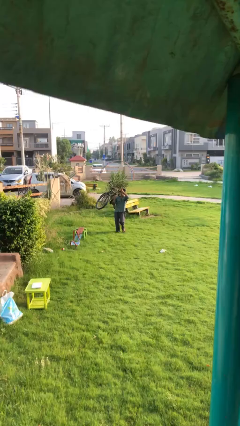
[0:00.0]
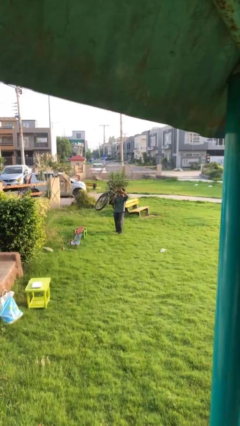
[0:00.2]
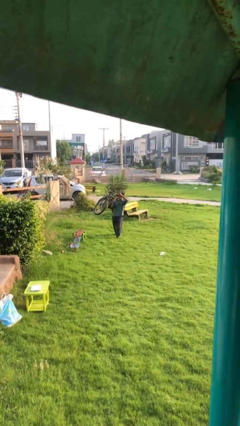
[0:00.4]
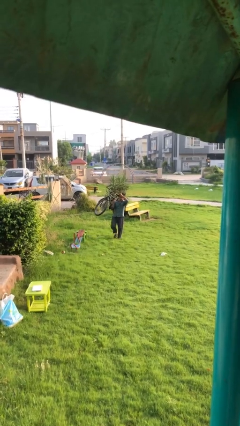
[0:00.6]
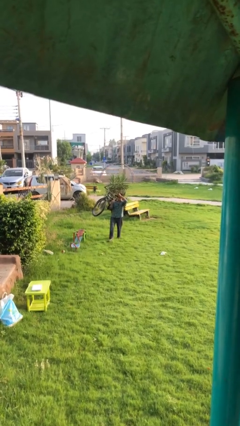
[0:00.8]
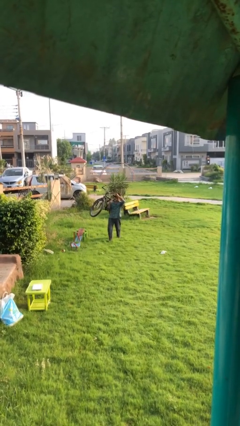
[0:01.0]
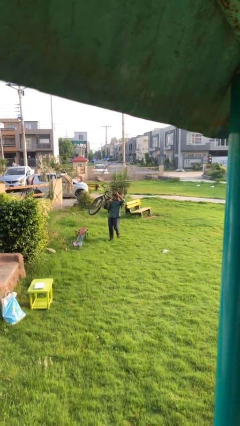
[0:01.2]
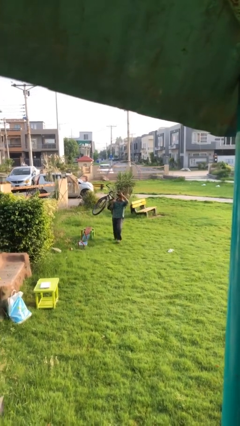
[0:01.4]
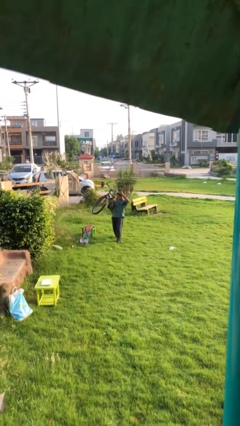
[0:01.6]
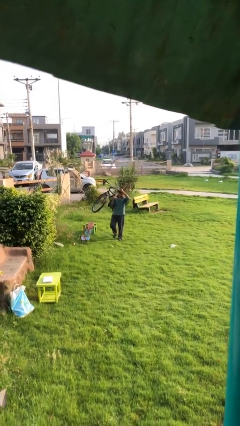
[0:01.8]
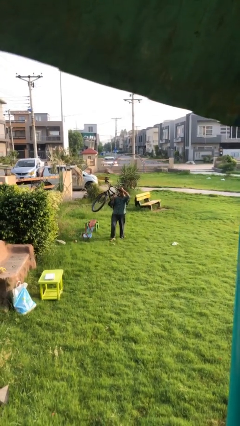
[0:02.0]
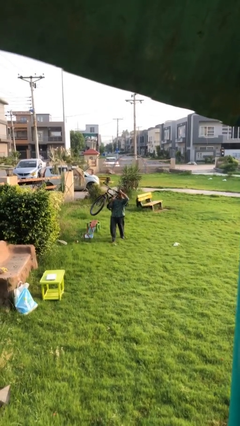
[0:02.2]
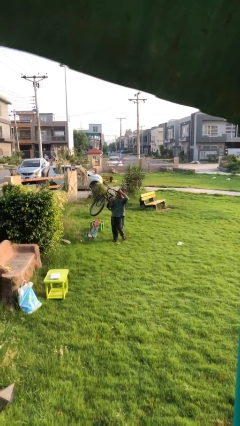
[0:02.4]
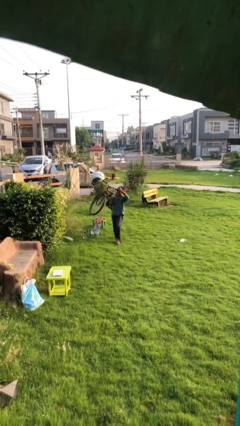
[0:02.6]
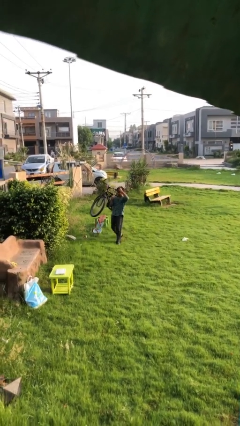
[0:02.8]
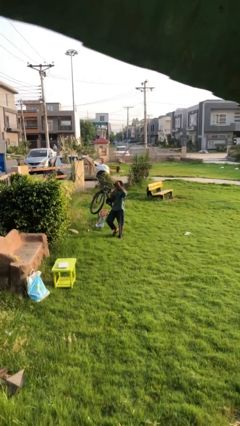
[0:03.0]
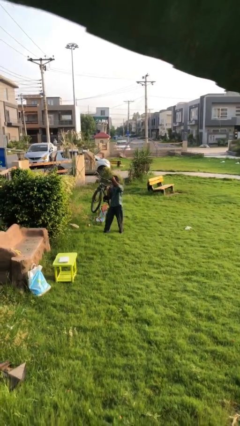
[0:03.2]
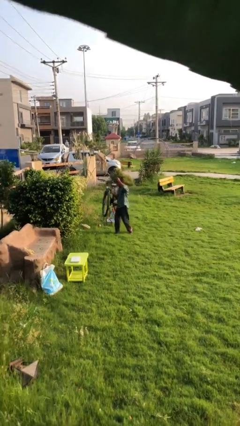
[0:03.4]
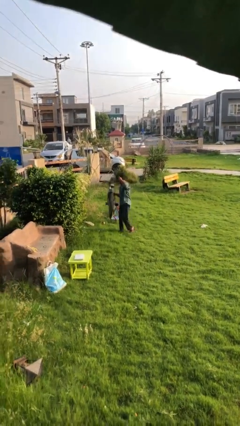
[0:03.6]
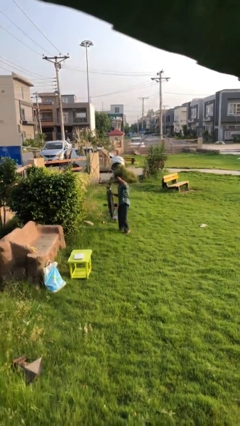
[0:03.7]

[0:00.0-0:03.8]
person carries heavy object

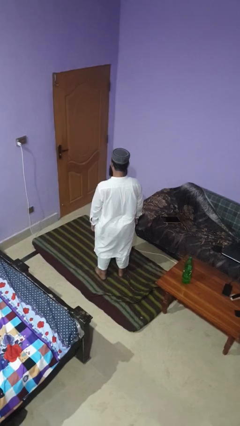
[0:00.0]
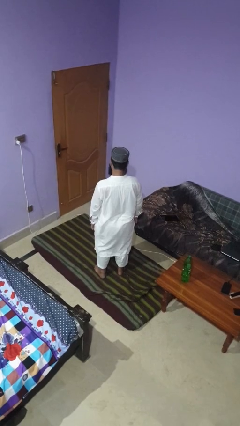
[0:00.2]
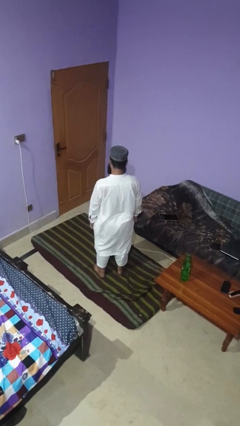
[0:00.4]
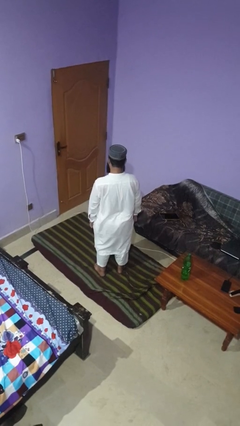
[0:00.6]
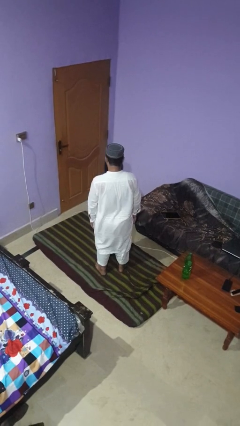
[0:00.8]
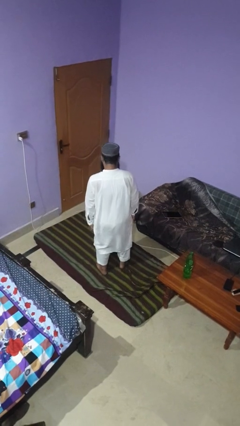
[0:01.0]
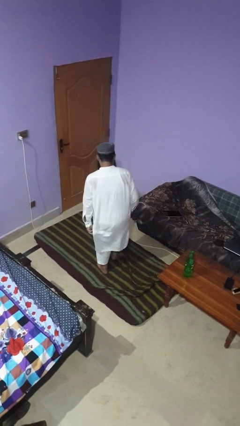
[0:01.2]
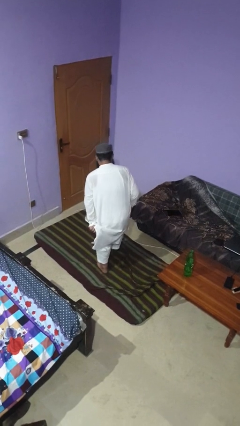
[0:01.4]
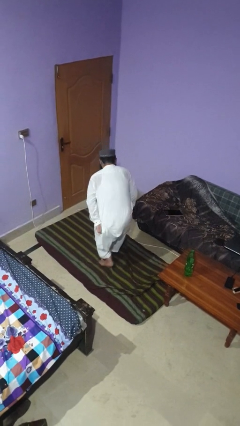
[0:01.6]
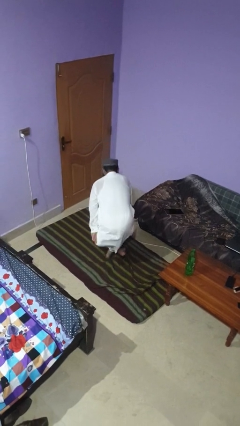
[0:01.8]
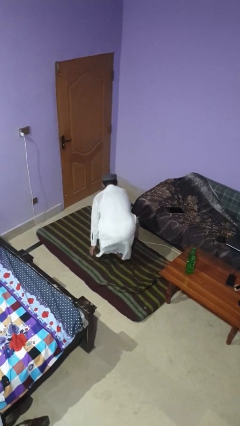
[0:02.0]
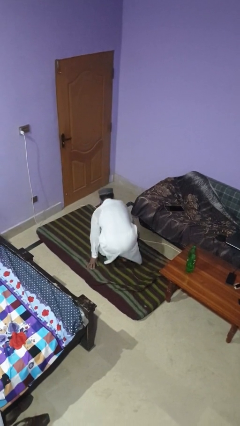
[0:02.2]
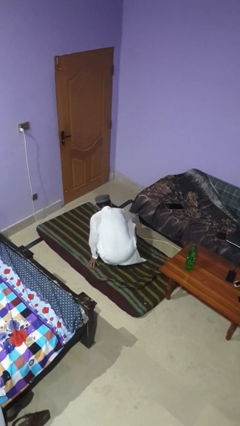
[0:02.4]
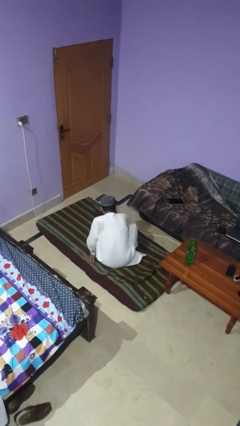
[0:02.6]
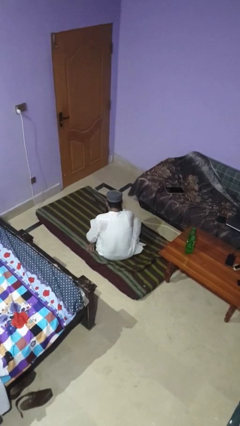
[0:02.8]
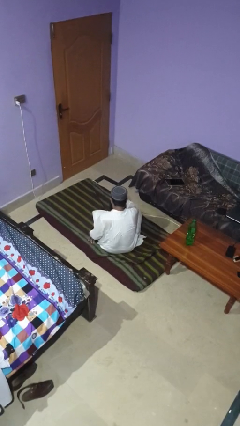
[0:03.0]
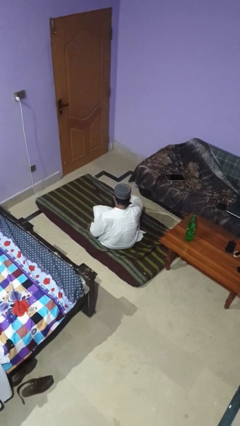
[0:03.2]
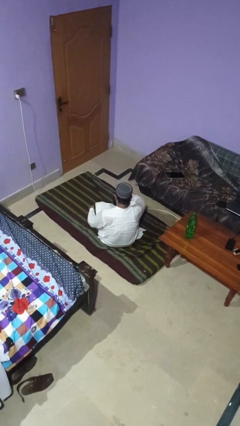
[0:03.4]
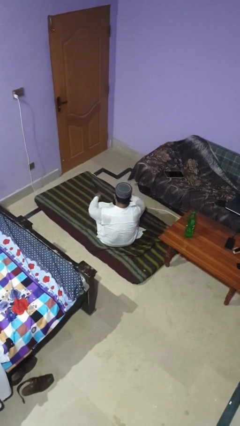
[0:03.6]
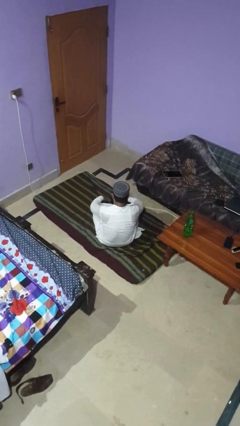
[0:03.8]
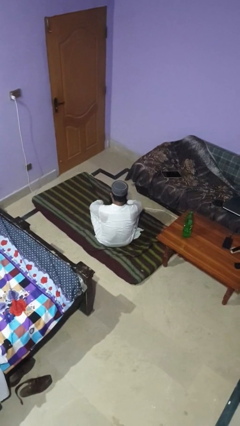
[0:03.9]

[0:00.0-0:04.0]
person sits crisscross

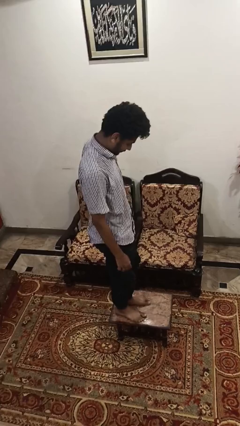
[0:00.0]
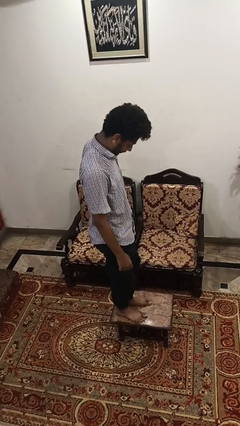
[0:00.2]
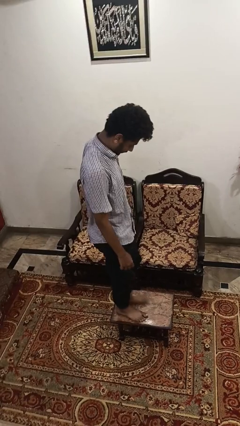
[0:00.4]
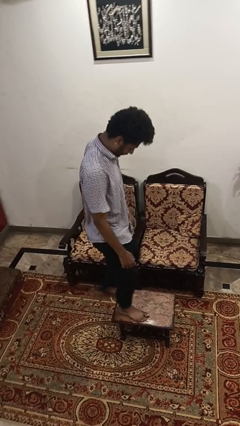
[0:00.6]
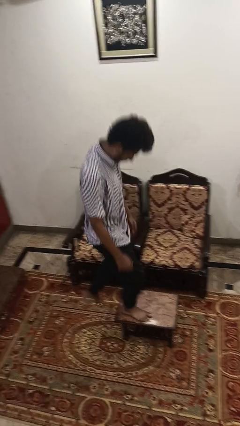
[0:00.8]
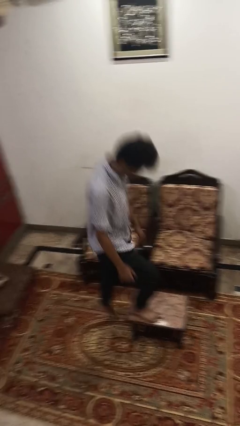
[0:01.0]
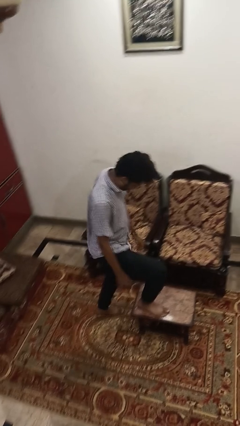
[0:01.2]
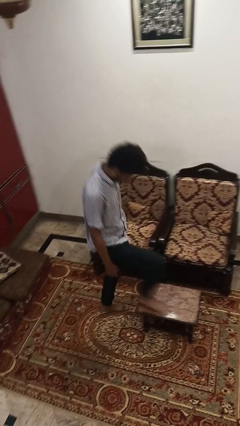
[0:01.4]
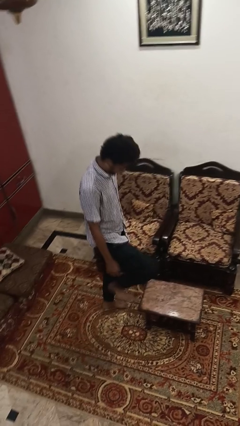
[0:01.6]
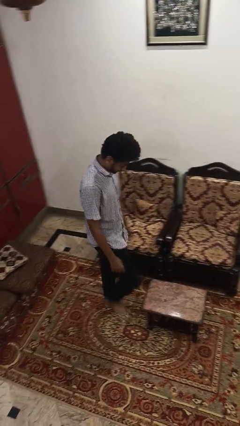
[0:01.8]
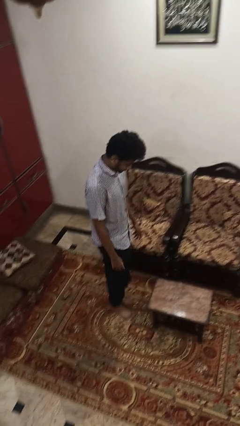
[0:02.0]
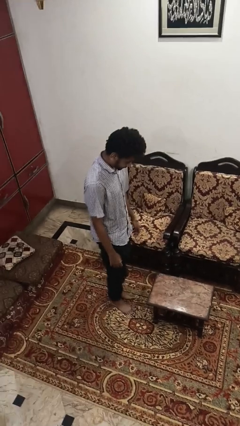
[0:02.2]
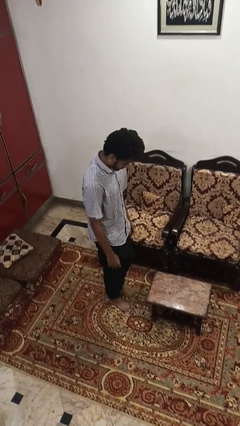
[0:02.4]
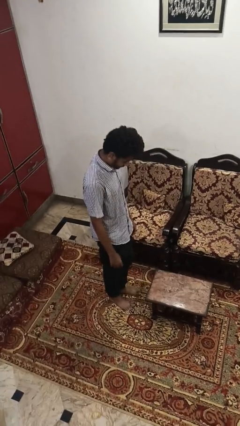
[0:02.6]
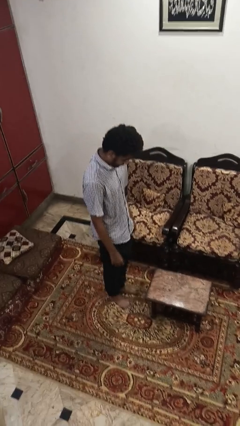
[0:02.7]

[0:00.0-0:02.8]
person climbs off table

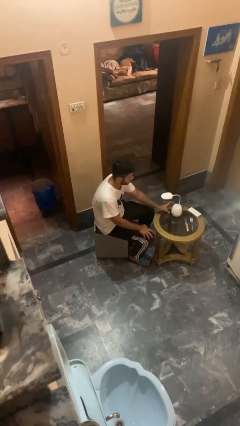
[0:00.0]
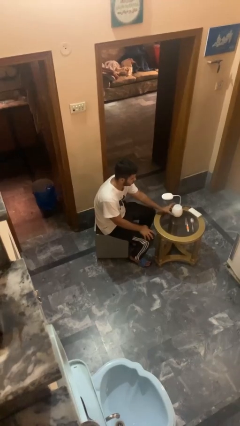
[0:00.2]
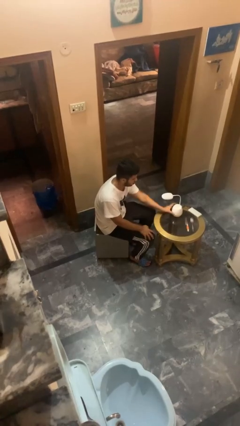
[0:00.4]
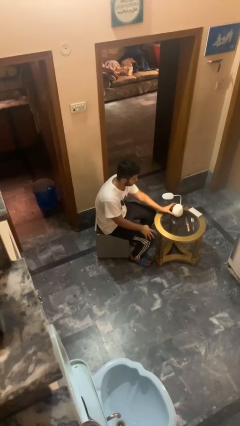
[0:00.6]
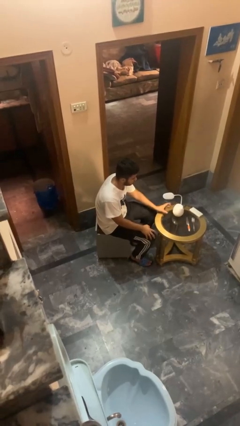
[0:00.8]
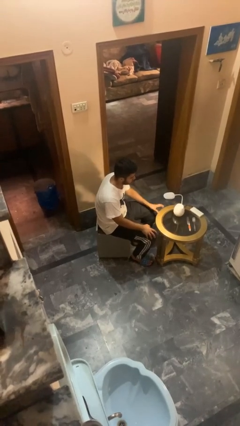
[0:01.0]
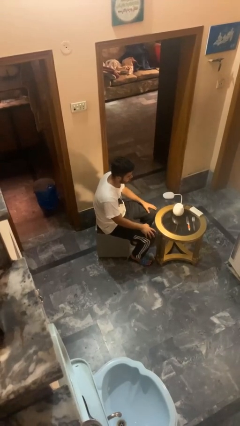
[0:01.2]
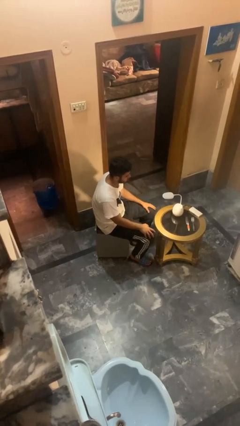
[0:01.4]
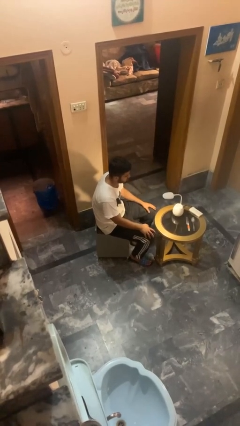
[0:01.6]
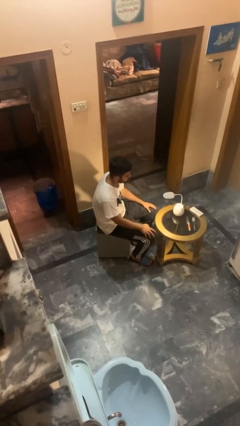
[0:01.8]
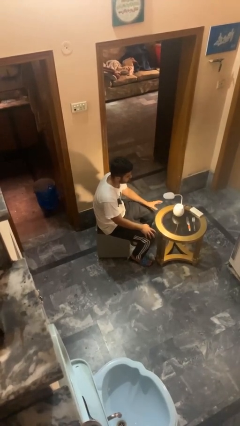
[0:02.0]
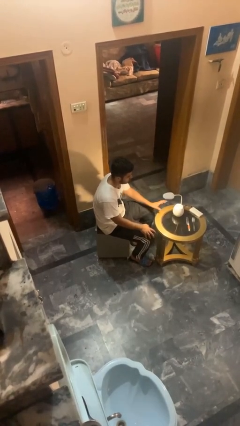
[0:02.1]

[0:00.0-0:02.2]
person turns on lamp

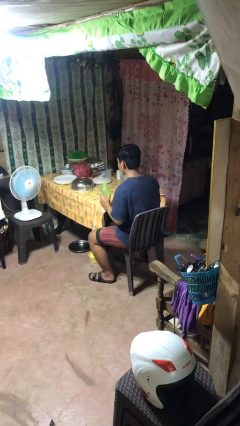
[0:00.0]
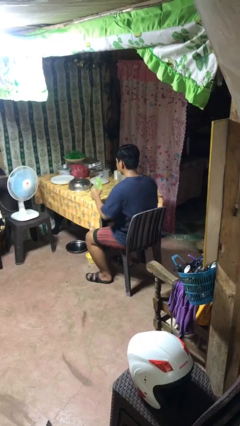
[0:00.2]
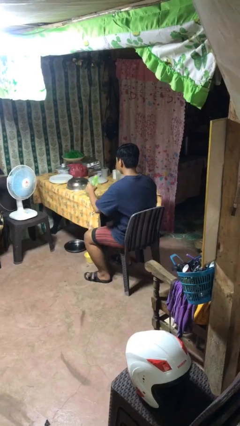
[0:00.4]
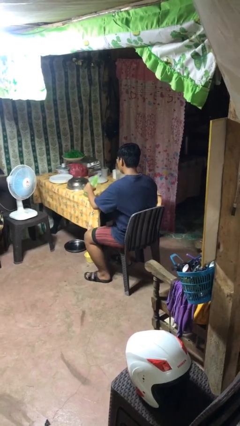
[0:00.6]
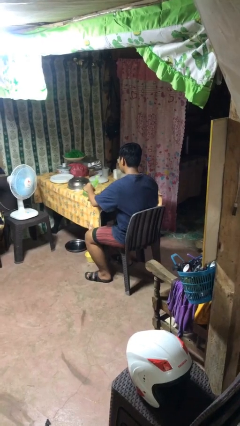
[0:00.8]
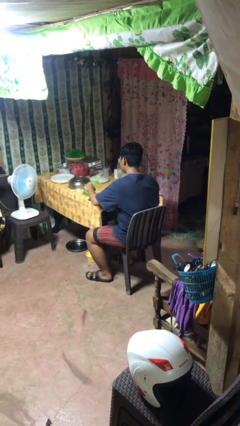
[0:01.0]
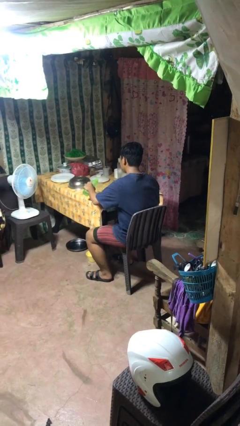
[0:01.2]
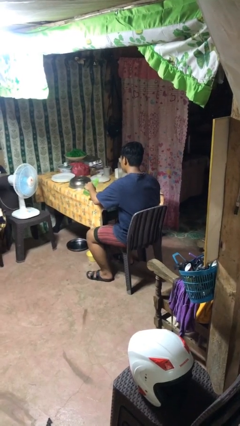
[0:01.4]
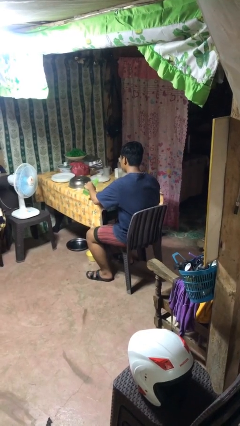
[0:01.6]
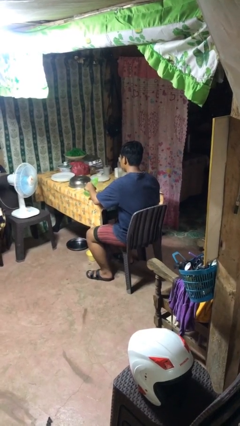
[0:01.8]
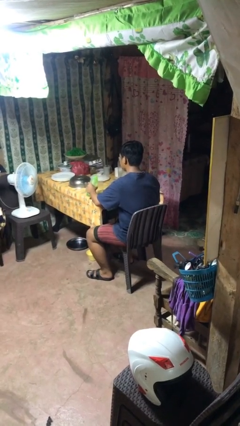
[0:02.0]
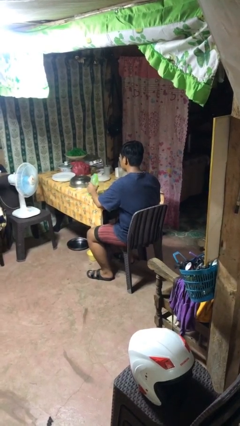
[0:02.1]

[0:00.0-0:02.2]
person pours liquid into cup

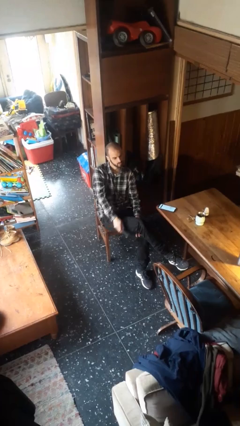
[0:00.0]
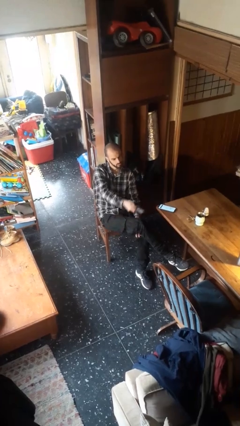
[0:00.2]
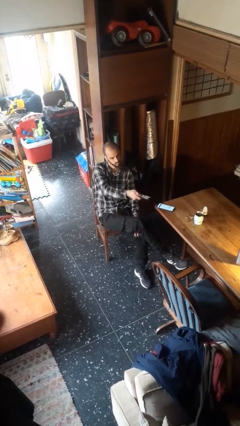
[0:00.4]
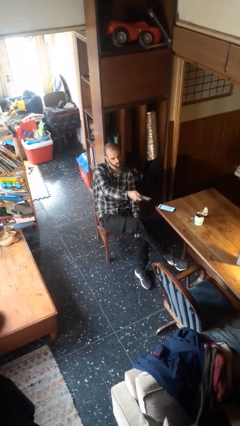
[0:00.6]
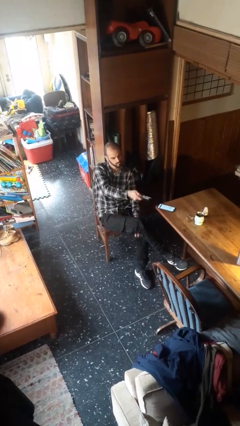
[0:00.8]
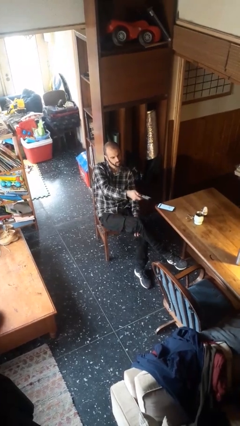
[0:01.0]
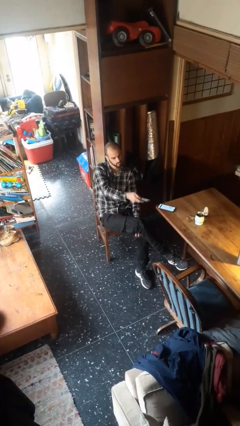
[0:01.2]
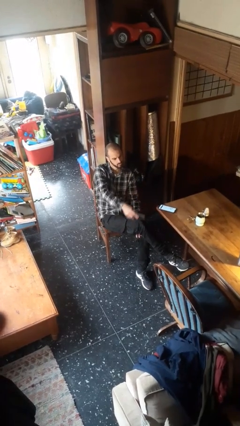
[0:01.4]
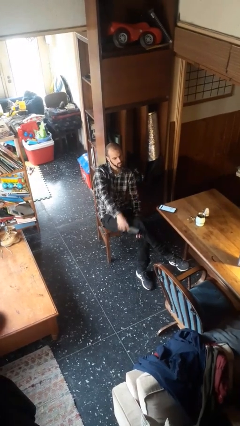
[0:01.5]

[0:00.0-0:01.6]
person uses television remote

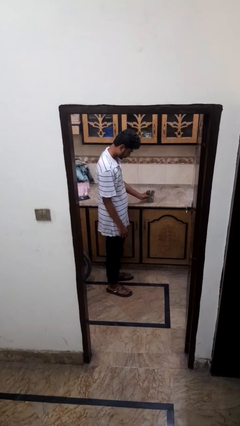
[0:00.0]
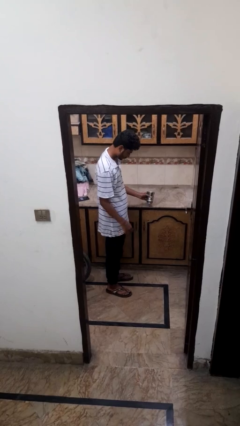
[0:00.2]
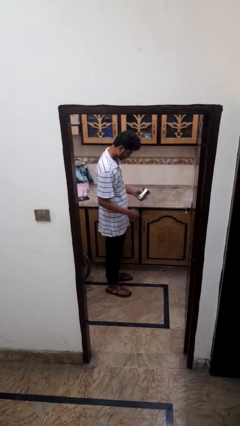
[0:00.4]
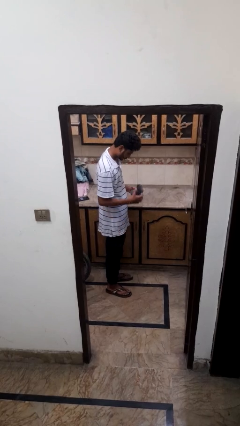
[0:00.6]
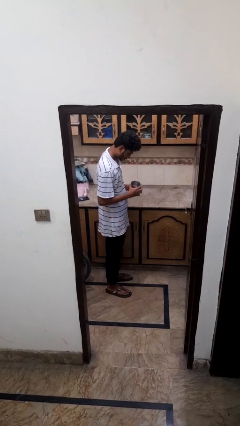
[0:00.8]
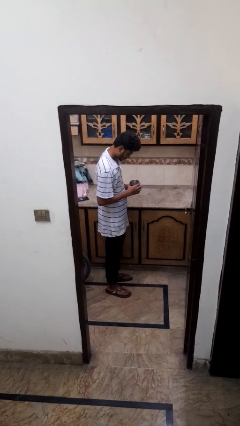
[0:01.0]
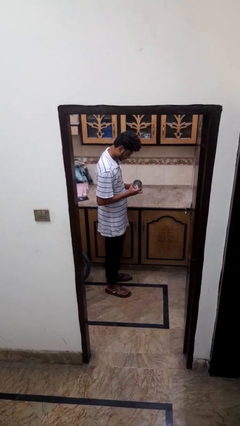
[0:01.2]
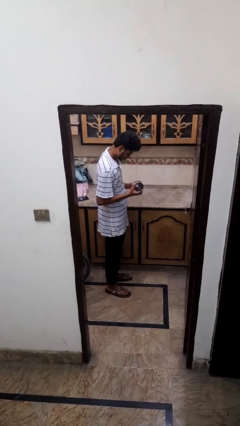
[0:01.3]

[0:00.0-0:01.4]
person picks up object from countertop
